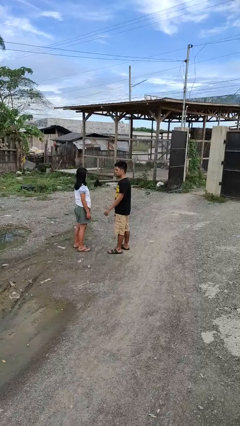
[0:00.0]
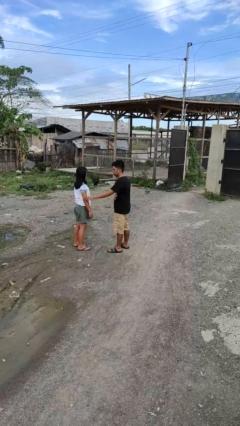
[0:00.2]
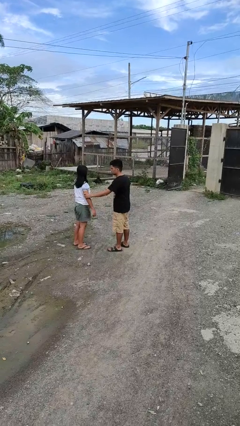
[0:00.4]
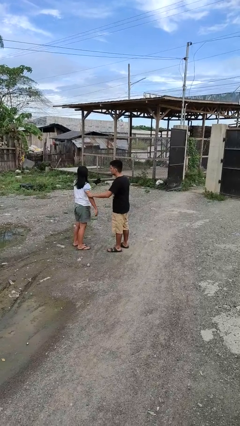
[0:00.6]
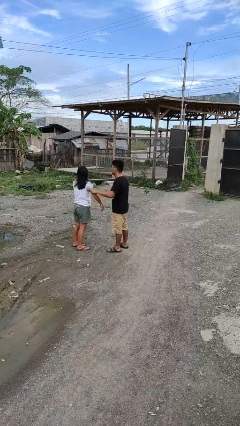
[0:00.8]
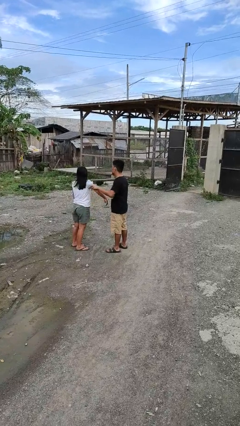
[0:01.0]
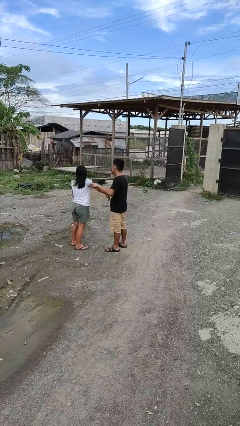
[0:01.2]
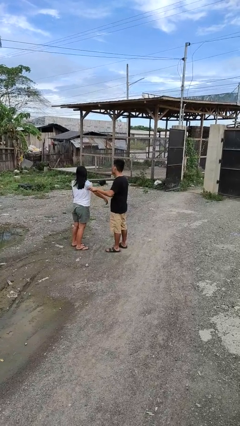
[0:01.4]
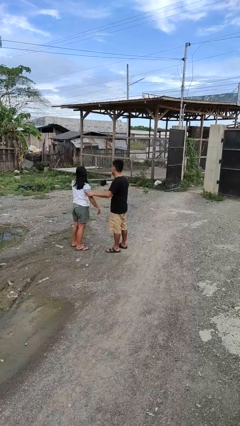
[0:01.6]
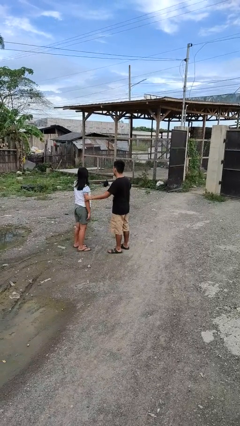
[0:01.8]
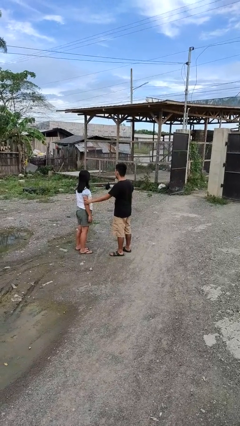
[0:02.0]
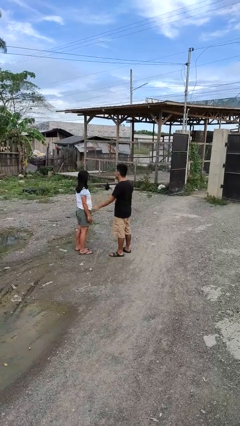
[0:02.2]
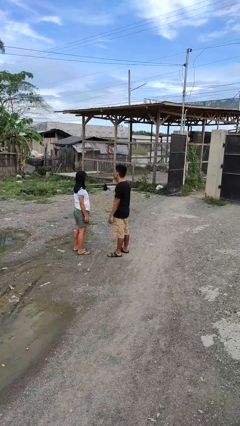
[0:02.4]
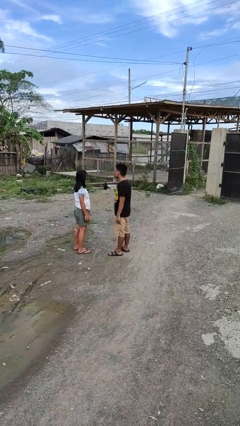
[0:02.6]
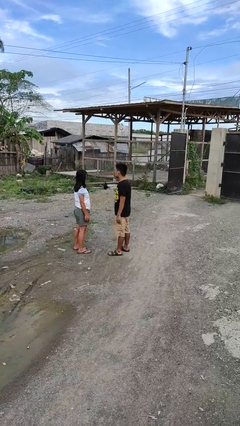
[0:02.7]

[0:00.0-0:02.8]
person grabs person by bicep

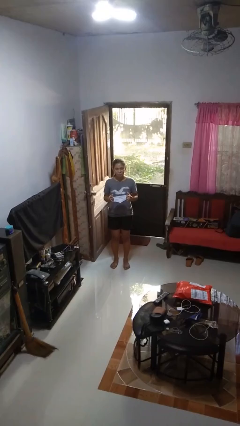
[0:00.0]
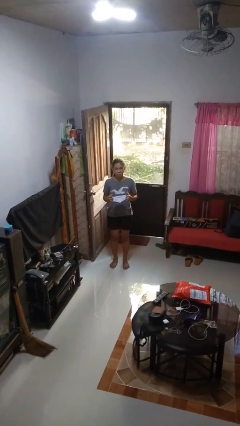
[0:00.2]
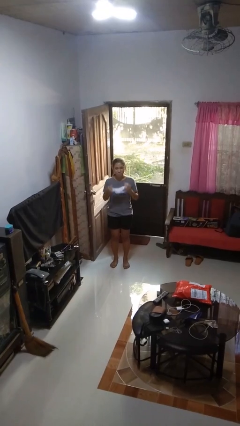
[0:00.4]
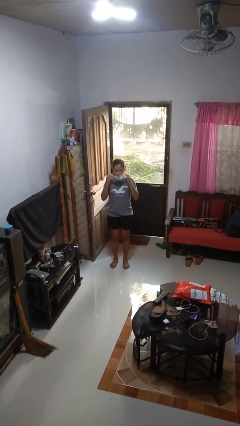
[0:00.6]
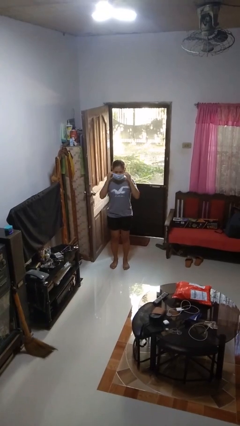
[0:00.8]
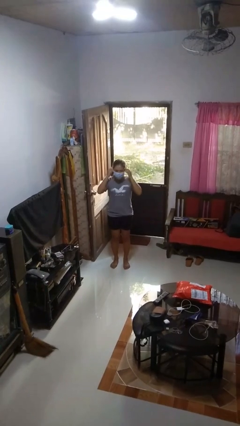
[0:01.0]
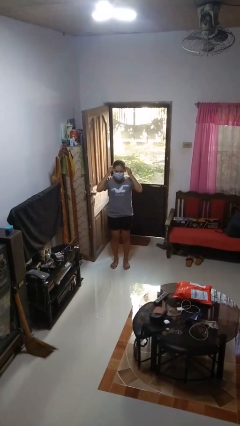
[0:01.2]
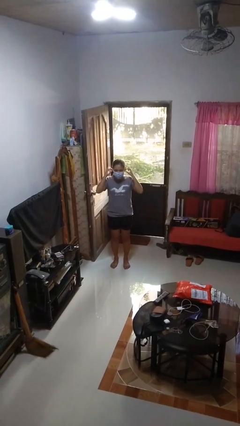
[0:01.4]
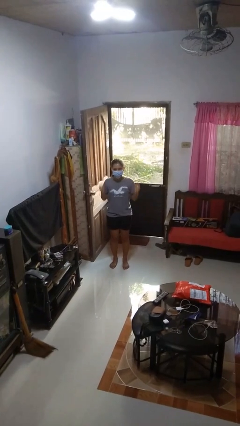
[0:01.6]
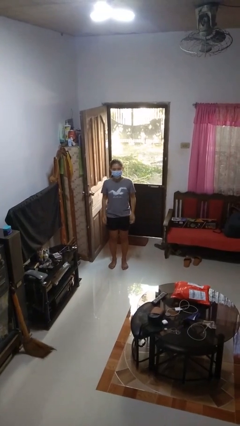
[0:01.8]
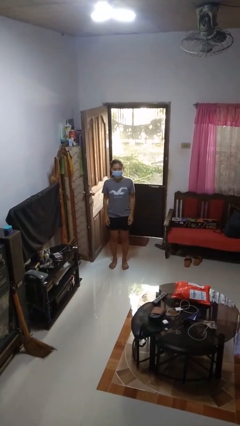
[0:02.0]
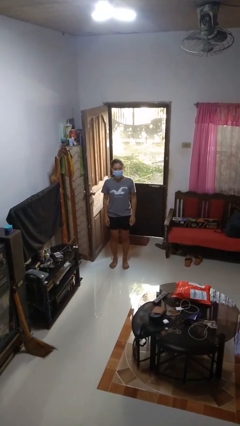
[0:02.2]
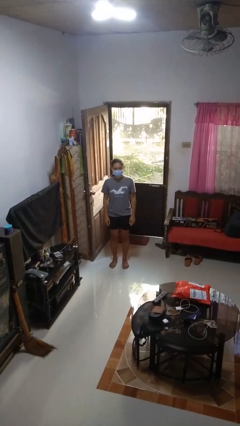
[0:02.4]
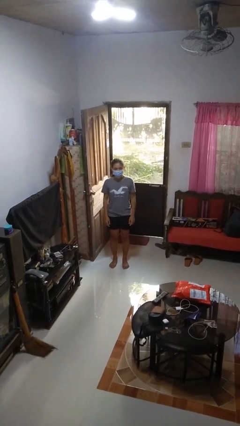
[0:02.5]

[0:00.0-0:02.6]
person puts on facemask

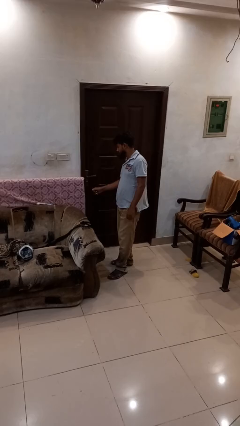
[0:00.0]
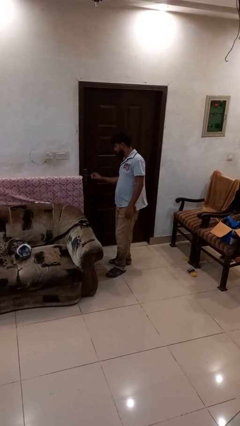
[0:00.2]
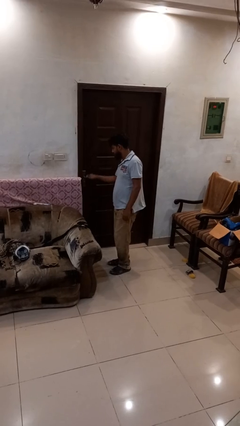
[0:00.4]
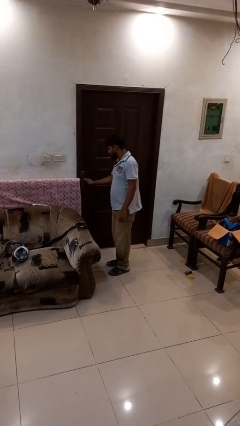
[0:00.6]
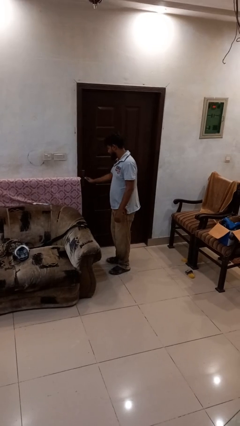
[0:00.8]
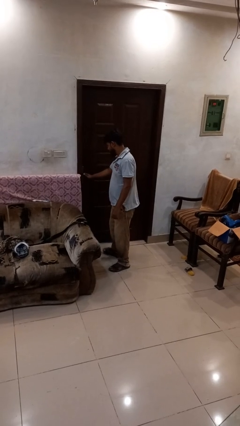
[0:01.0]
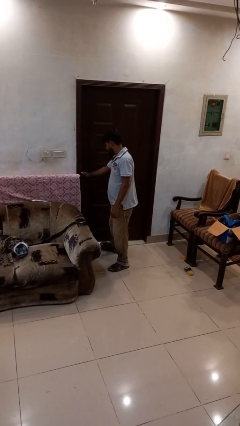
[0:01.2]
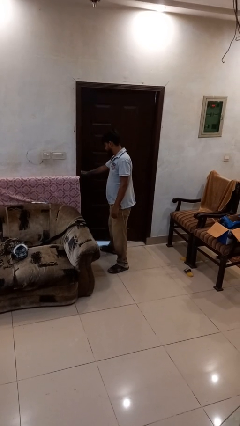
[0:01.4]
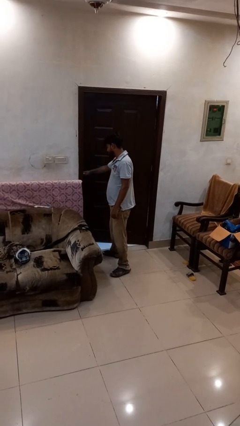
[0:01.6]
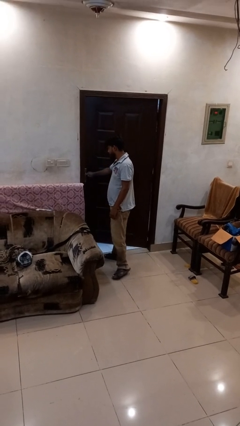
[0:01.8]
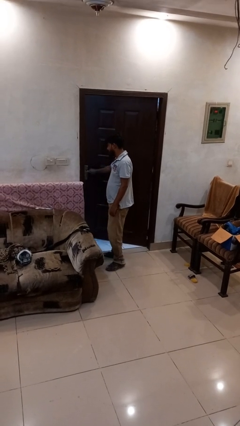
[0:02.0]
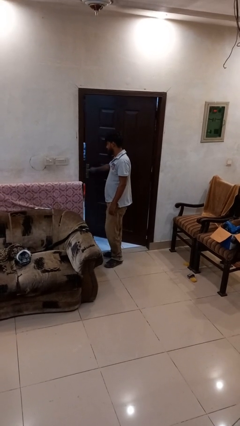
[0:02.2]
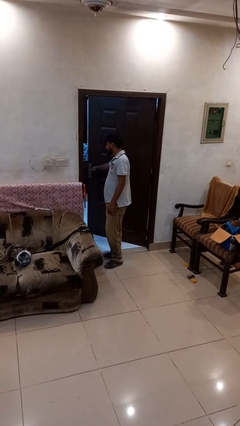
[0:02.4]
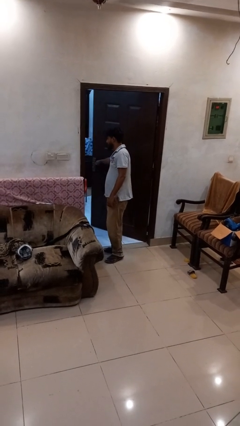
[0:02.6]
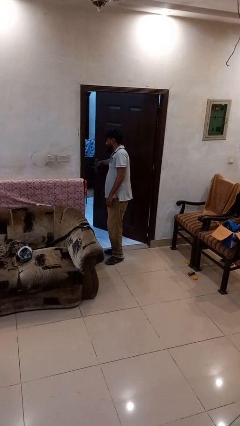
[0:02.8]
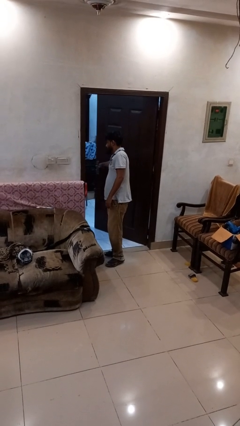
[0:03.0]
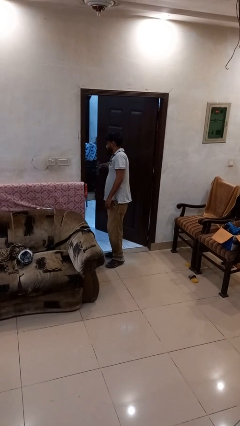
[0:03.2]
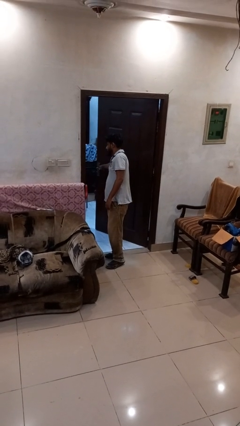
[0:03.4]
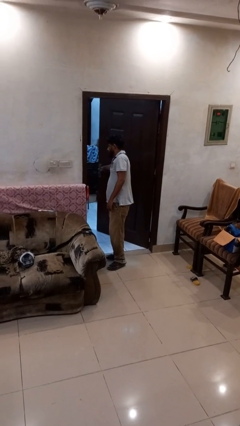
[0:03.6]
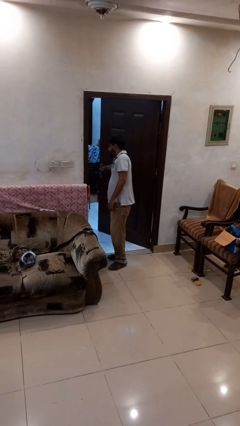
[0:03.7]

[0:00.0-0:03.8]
person opens facility door

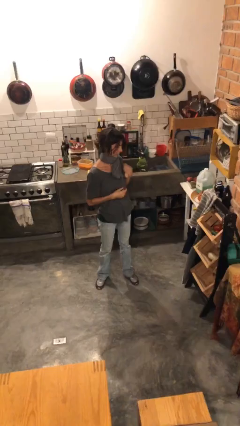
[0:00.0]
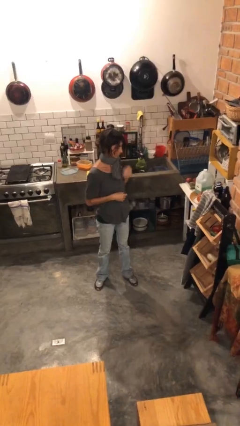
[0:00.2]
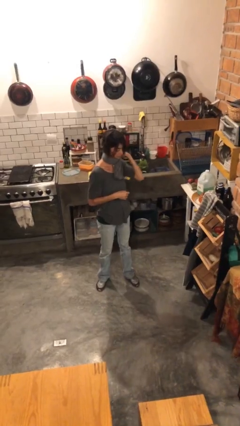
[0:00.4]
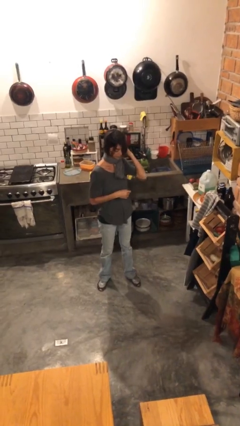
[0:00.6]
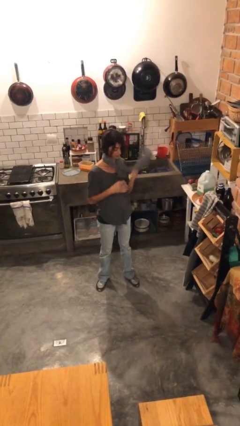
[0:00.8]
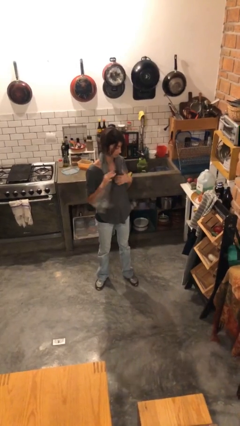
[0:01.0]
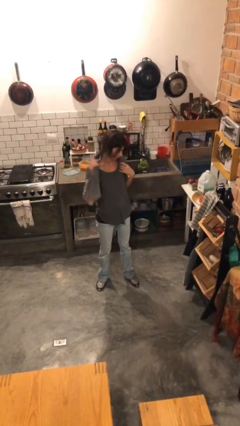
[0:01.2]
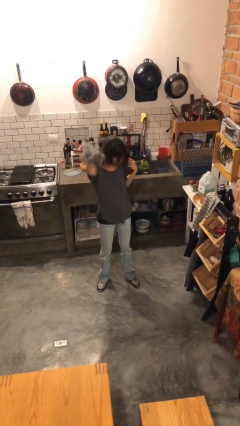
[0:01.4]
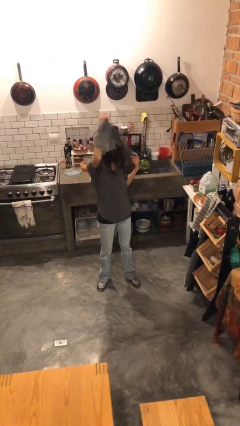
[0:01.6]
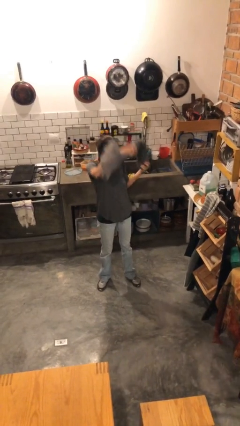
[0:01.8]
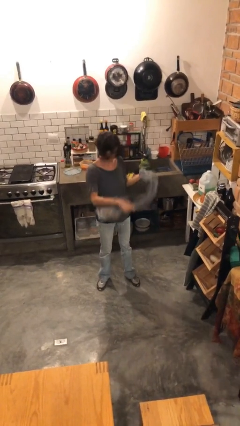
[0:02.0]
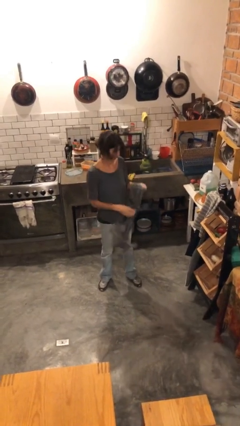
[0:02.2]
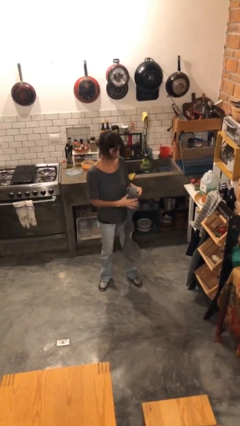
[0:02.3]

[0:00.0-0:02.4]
person takes off scarf

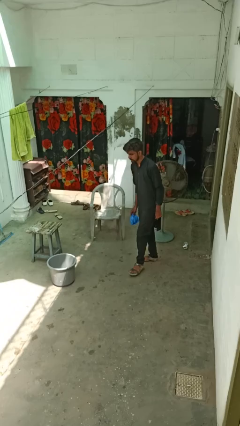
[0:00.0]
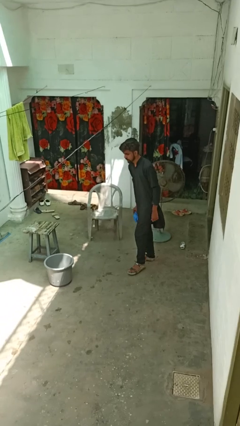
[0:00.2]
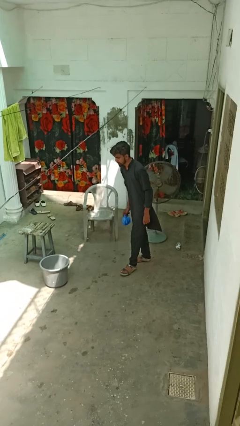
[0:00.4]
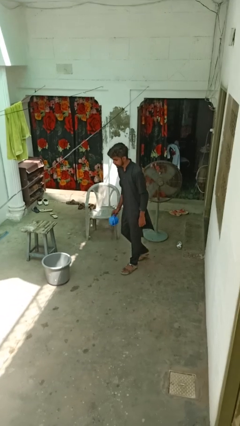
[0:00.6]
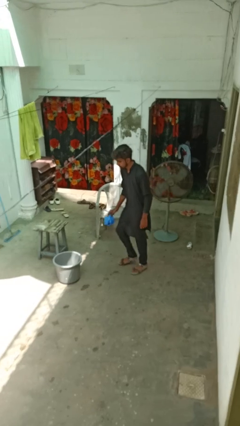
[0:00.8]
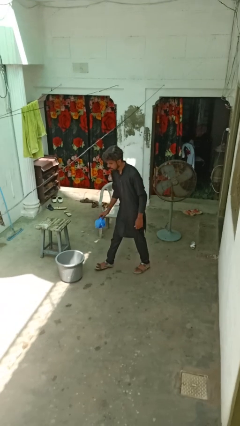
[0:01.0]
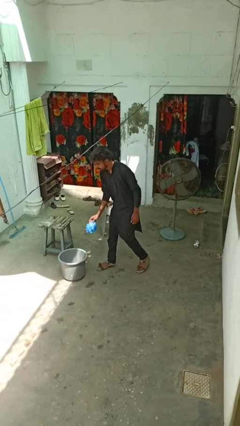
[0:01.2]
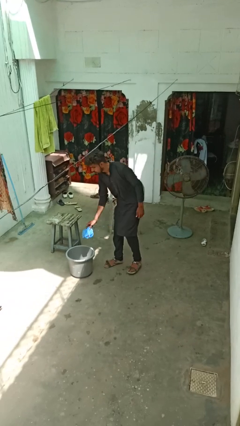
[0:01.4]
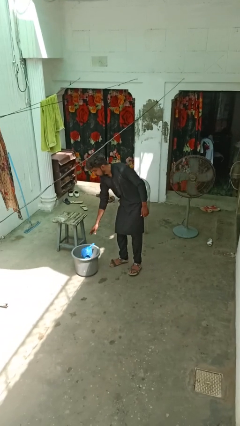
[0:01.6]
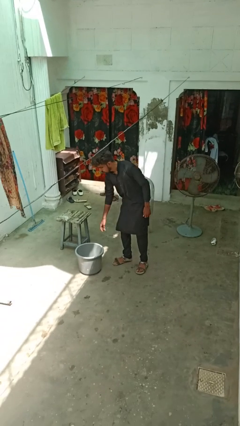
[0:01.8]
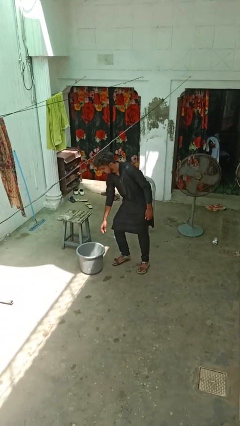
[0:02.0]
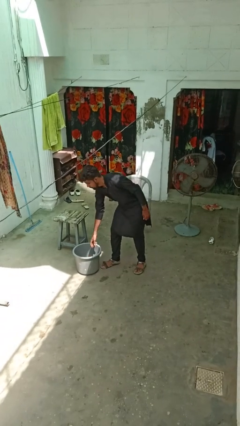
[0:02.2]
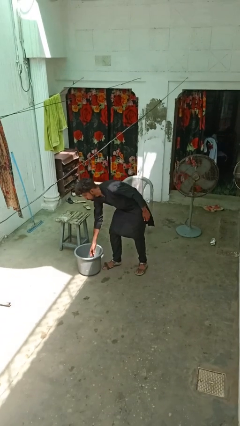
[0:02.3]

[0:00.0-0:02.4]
person discards trash

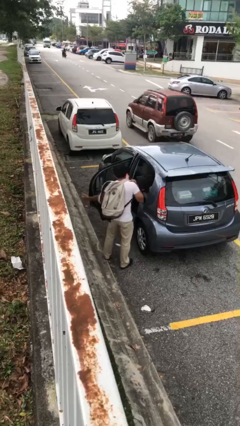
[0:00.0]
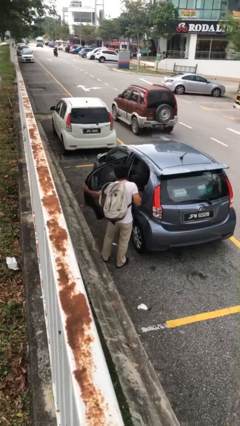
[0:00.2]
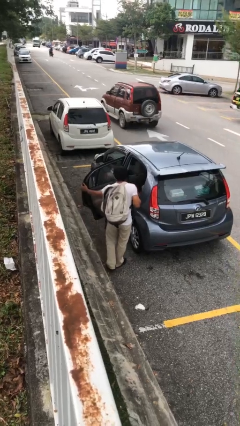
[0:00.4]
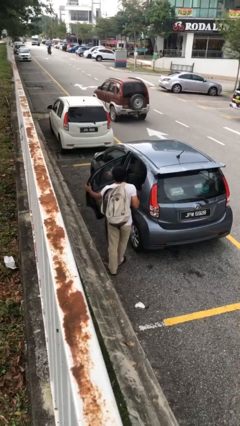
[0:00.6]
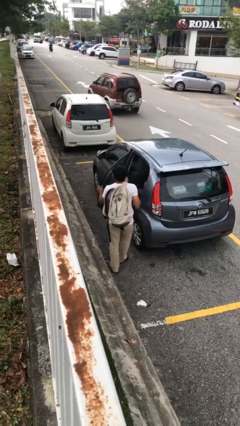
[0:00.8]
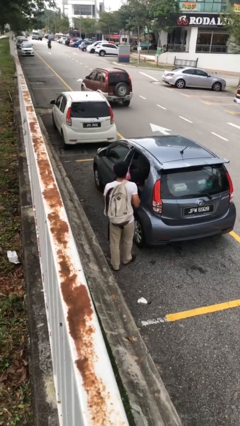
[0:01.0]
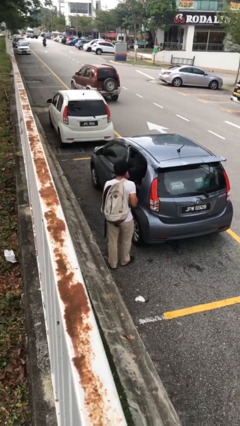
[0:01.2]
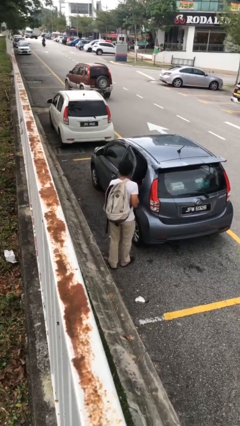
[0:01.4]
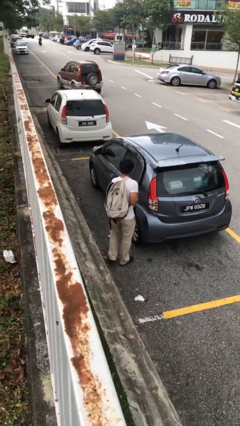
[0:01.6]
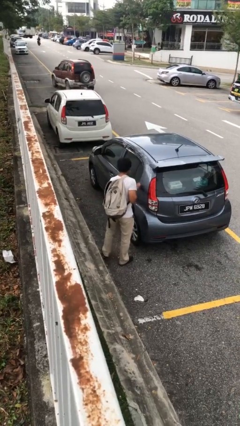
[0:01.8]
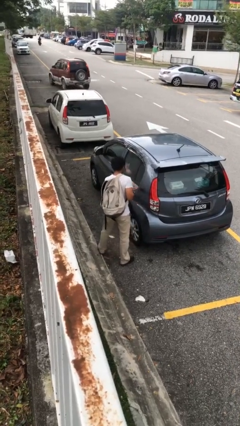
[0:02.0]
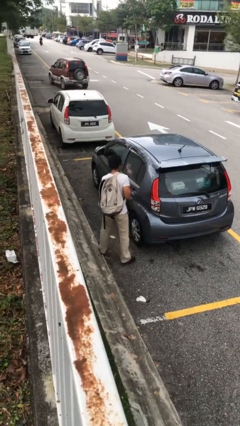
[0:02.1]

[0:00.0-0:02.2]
person closes car door

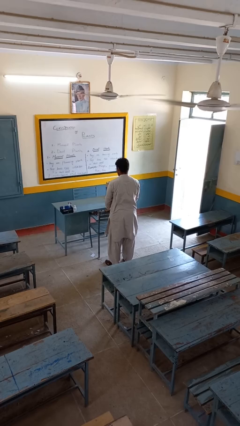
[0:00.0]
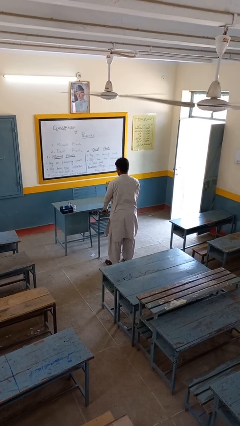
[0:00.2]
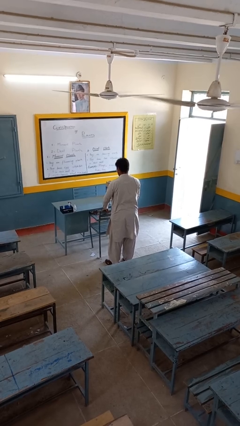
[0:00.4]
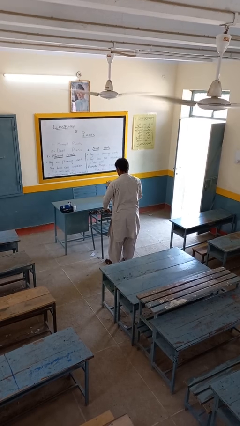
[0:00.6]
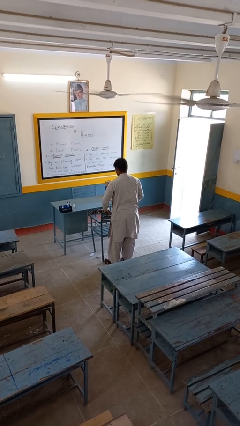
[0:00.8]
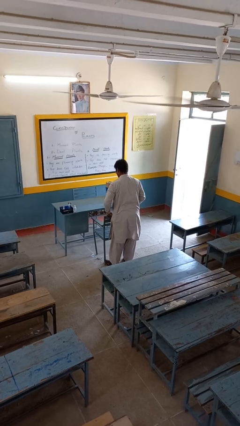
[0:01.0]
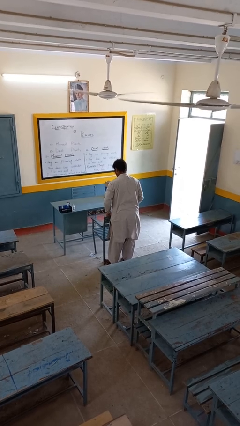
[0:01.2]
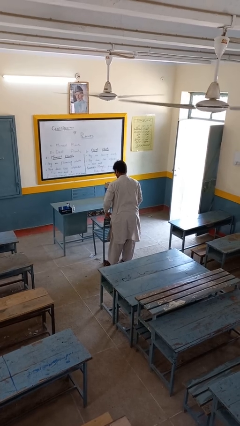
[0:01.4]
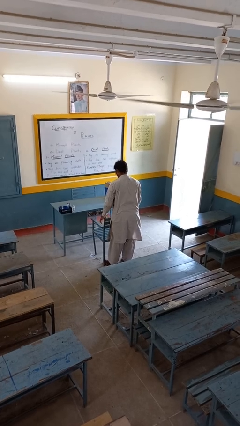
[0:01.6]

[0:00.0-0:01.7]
person pulls out chair
